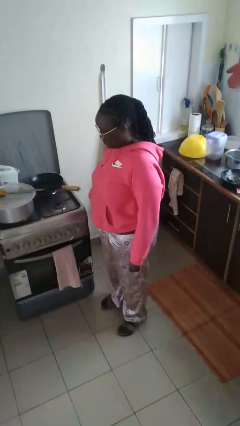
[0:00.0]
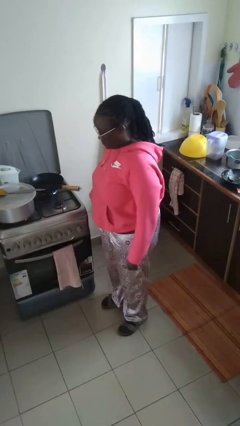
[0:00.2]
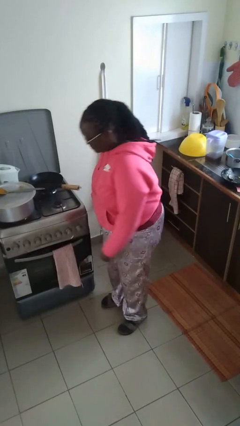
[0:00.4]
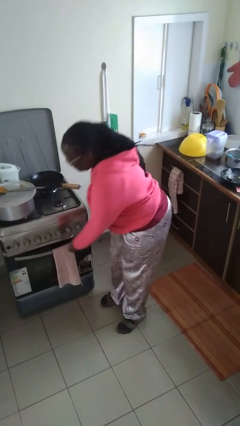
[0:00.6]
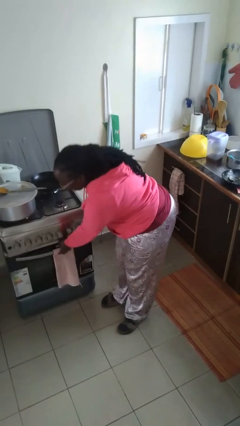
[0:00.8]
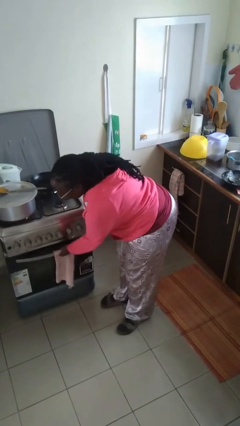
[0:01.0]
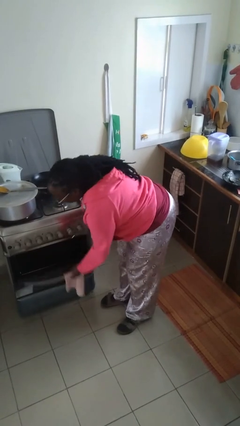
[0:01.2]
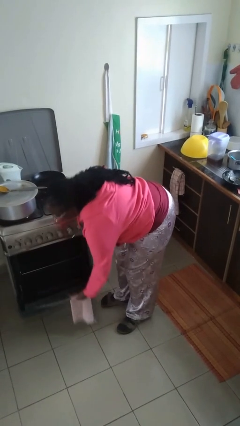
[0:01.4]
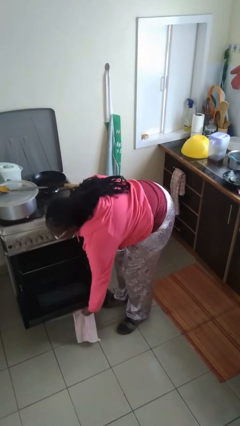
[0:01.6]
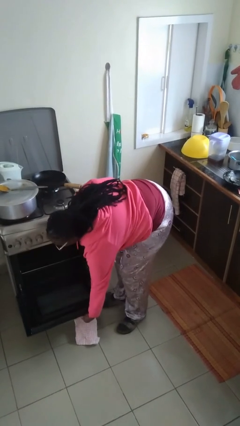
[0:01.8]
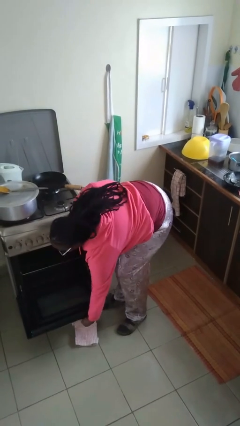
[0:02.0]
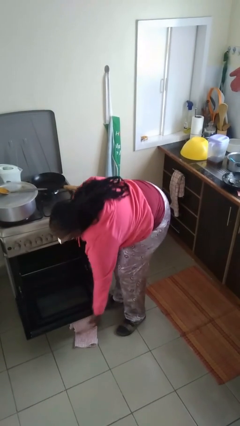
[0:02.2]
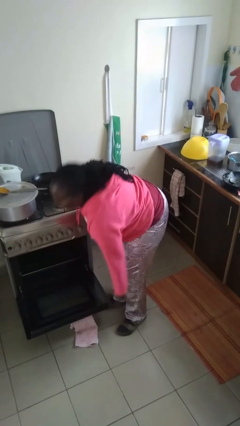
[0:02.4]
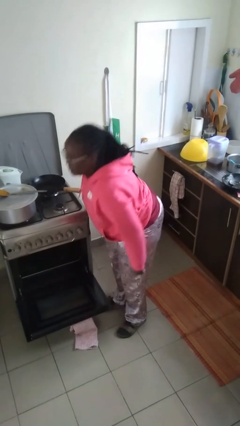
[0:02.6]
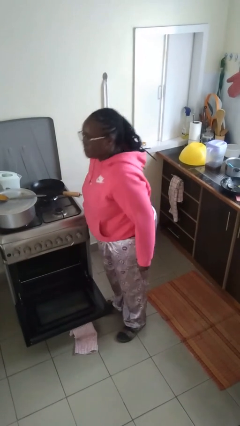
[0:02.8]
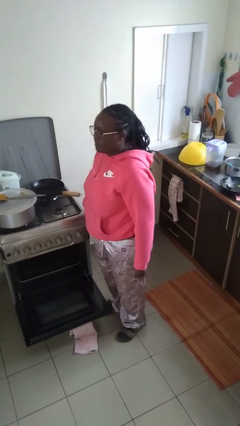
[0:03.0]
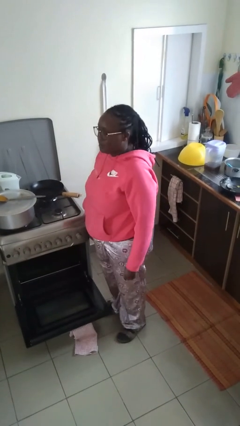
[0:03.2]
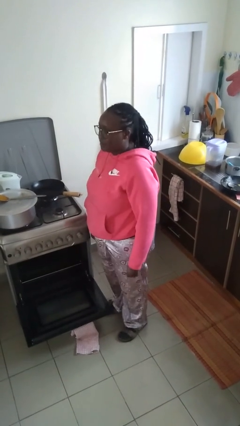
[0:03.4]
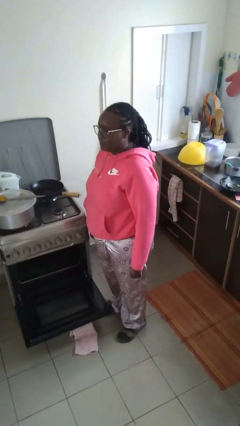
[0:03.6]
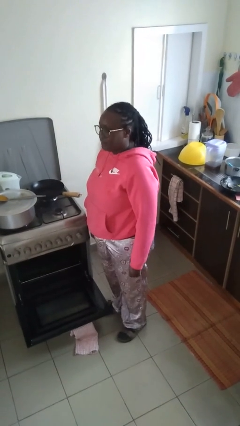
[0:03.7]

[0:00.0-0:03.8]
person opens oven door

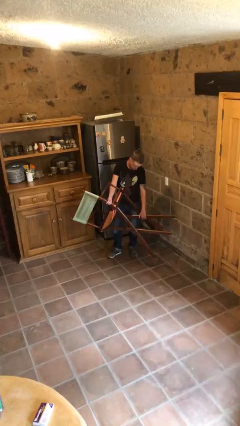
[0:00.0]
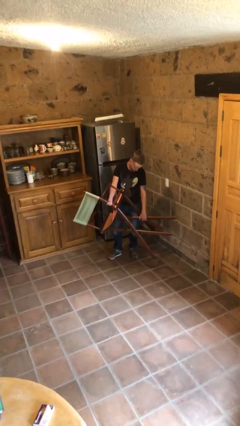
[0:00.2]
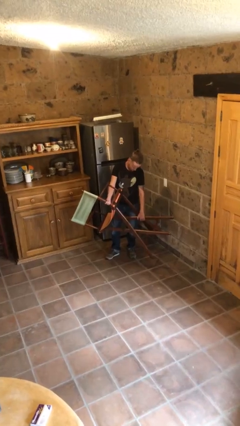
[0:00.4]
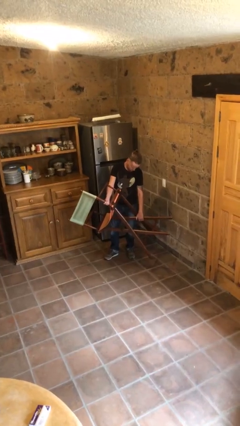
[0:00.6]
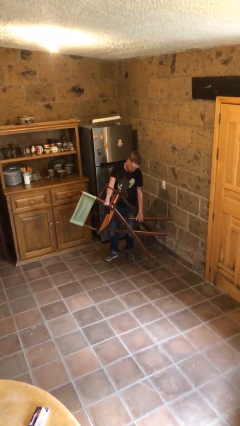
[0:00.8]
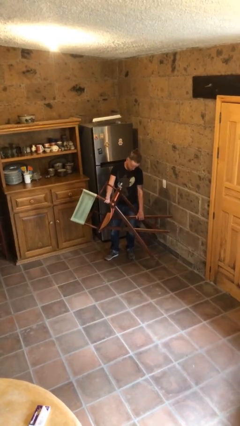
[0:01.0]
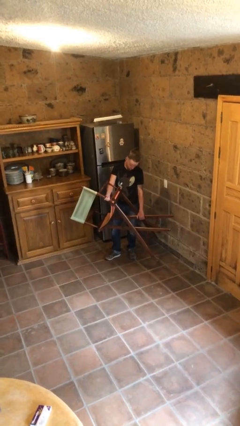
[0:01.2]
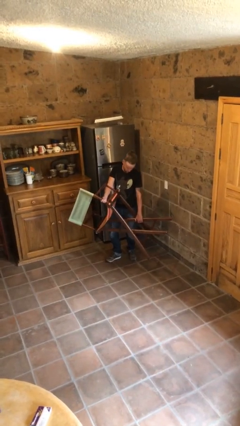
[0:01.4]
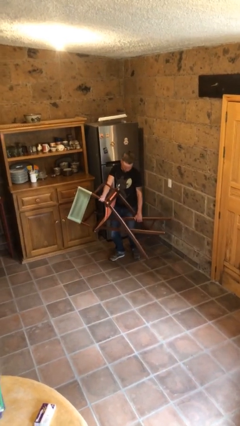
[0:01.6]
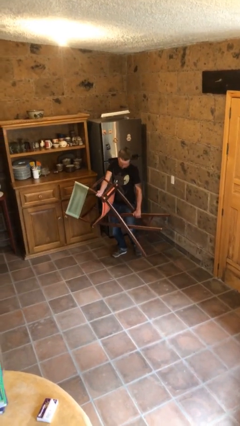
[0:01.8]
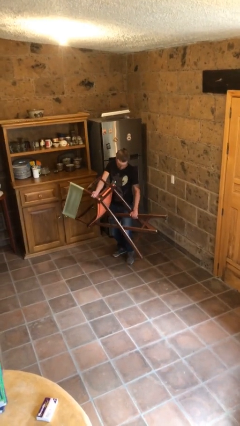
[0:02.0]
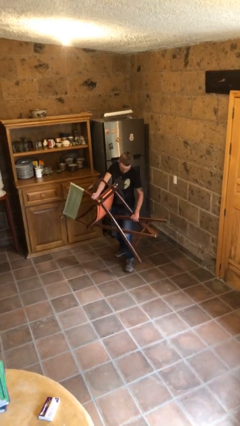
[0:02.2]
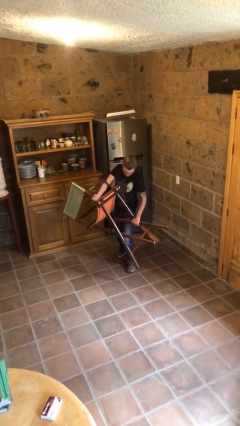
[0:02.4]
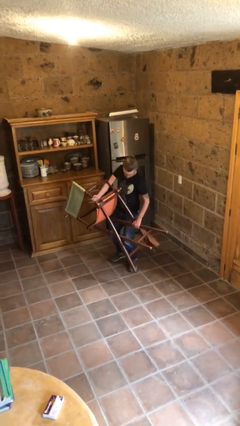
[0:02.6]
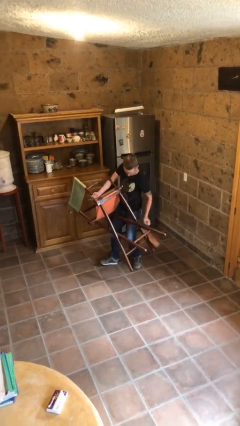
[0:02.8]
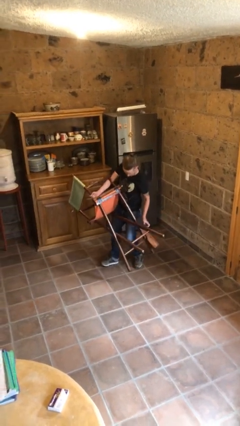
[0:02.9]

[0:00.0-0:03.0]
person carries heavy object

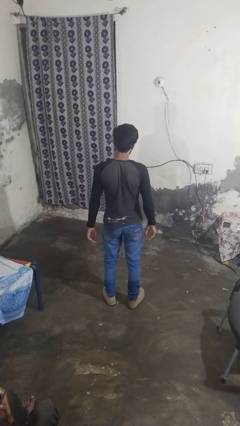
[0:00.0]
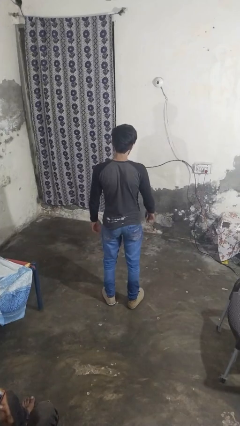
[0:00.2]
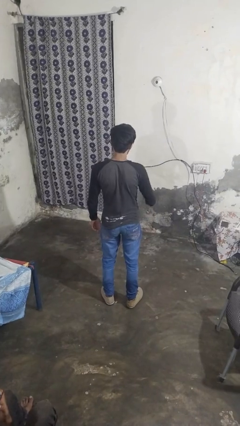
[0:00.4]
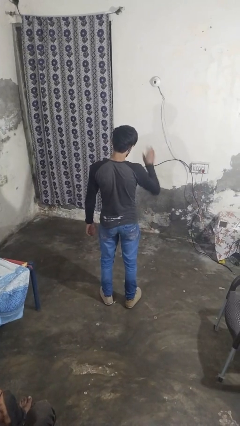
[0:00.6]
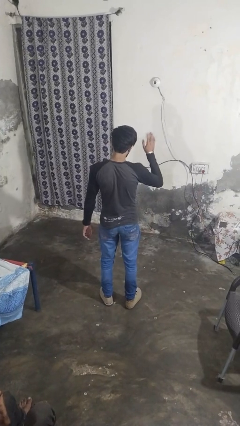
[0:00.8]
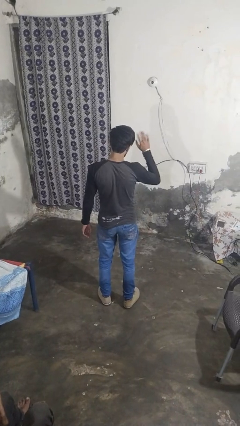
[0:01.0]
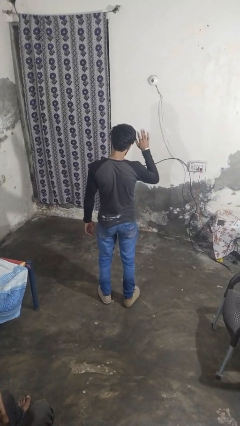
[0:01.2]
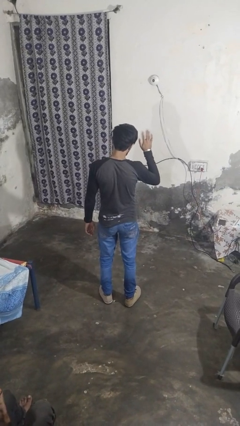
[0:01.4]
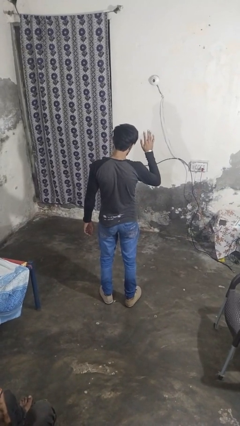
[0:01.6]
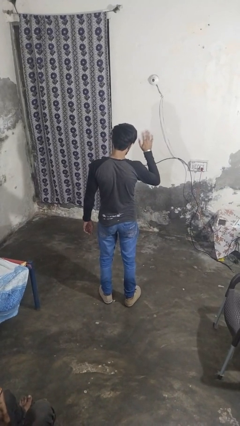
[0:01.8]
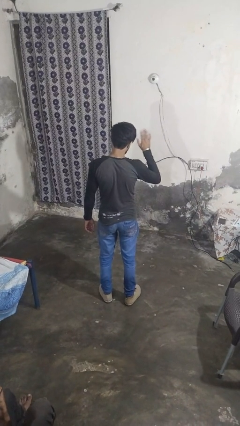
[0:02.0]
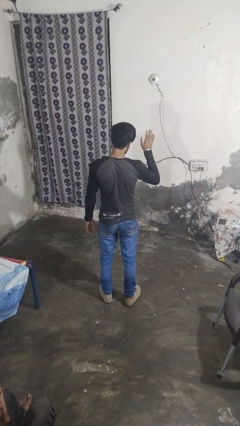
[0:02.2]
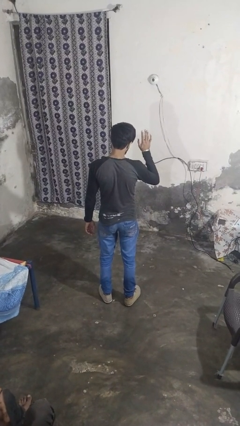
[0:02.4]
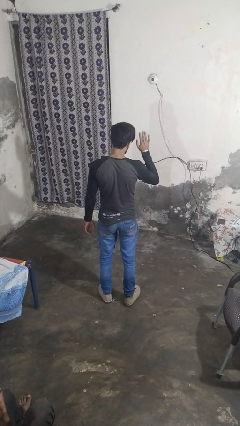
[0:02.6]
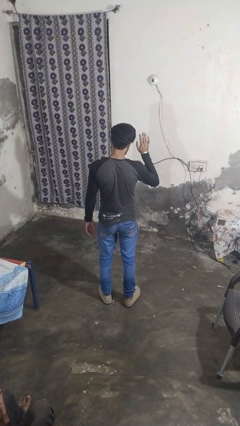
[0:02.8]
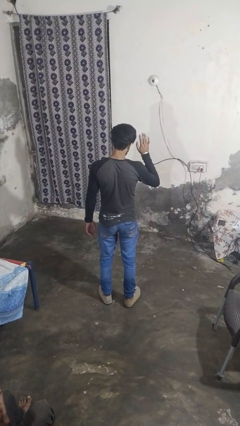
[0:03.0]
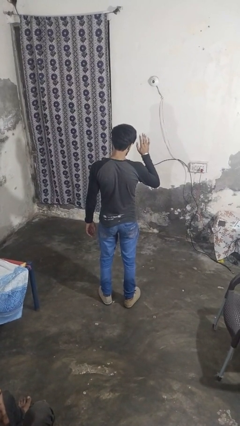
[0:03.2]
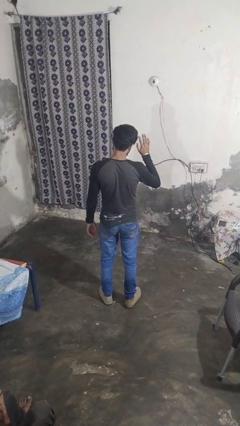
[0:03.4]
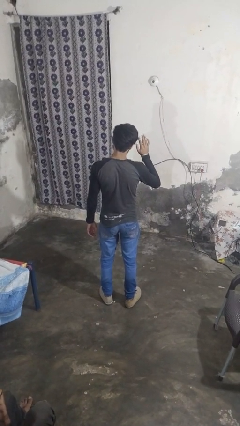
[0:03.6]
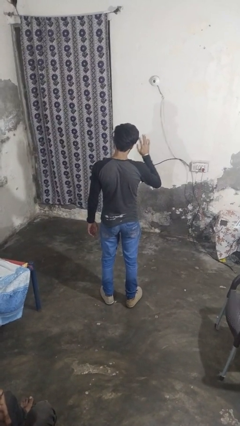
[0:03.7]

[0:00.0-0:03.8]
person waves at person

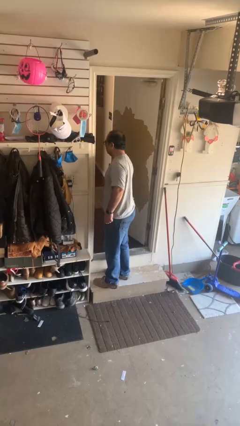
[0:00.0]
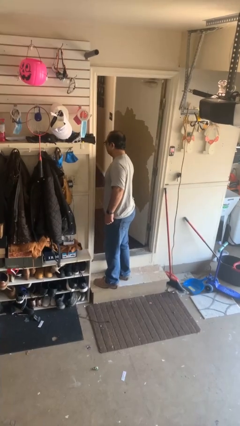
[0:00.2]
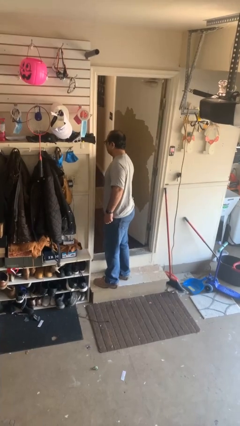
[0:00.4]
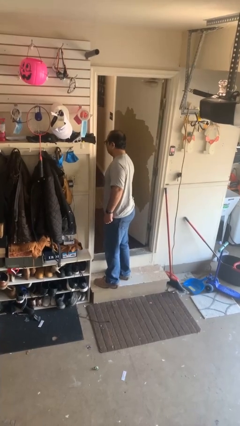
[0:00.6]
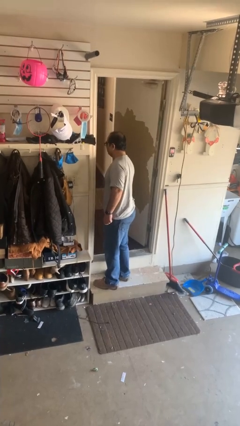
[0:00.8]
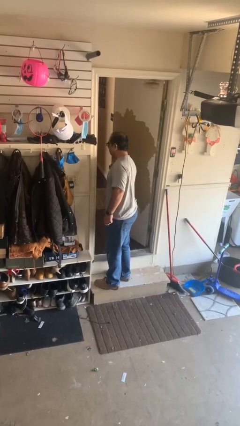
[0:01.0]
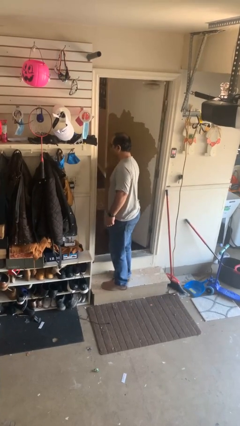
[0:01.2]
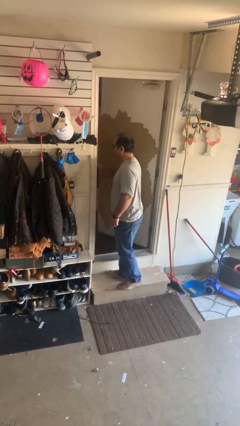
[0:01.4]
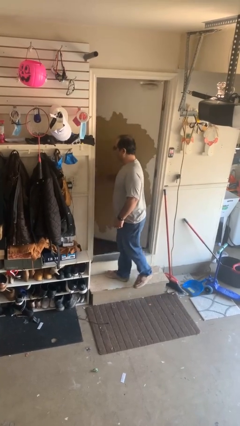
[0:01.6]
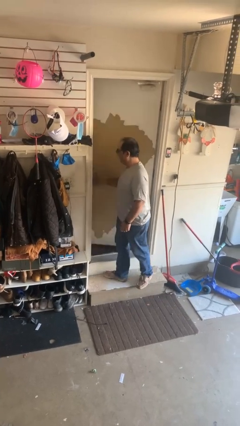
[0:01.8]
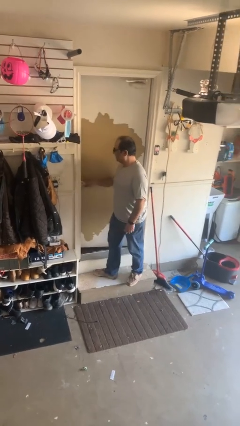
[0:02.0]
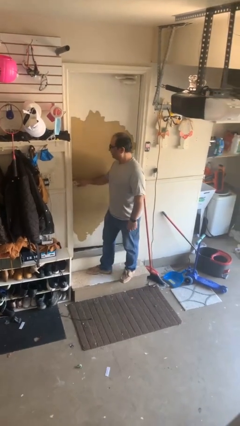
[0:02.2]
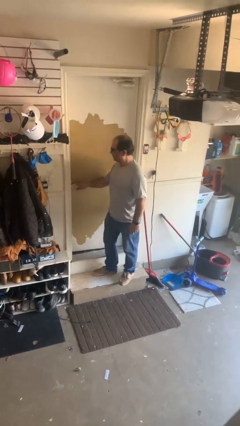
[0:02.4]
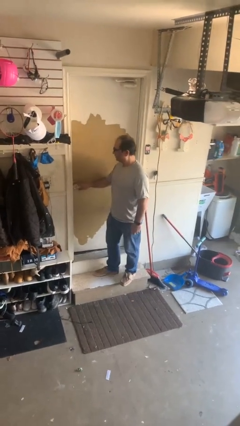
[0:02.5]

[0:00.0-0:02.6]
person closes facility door

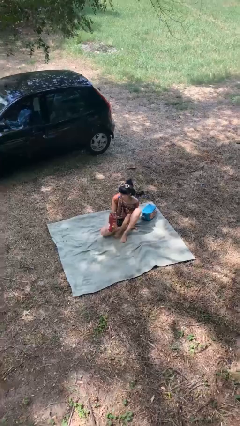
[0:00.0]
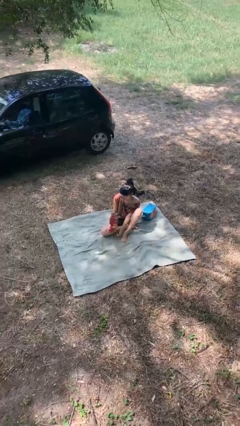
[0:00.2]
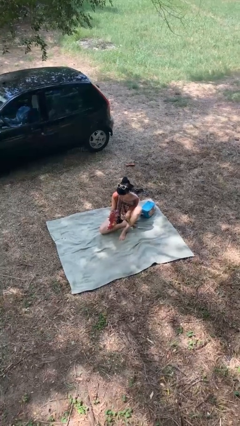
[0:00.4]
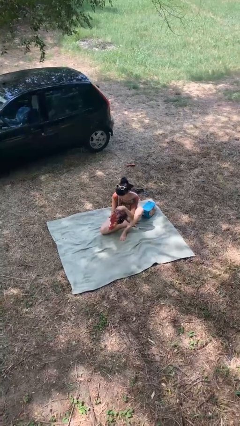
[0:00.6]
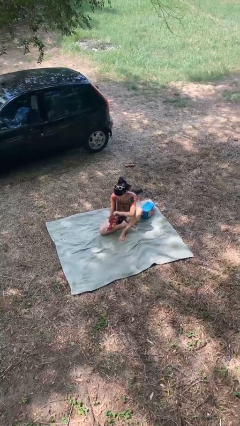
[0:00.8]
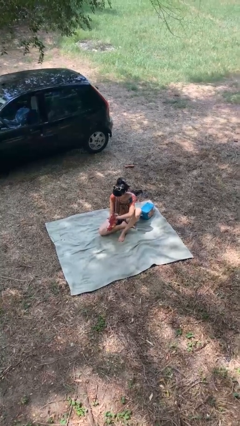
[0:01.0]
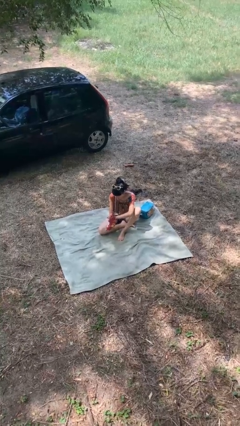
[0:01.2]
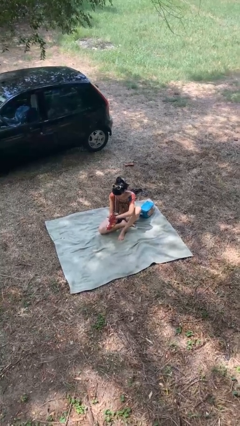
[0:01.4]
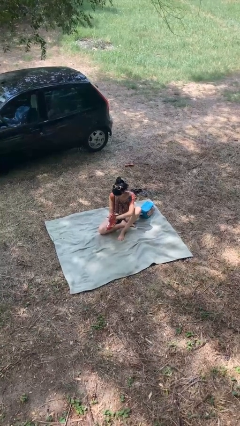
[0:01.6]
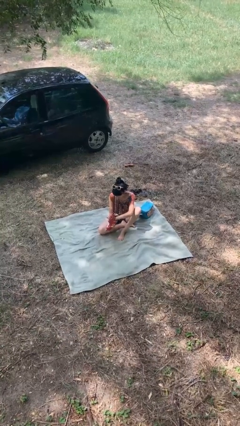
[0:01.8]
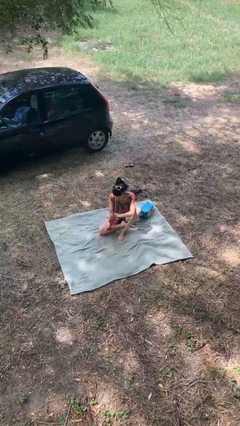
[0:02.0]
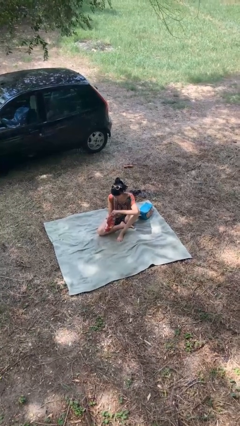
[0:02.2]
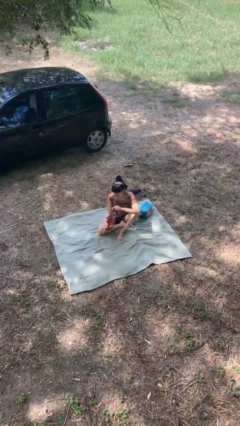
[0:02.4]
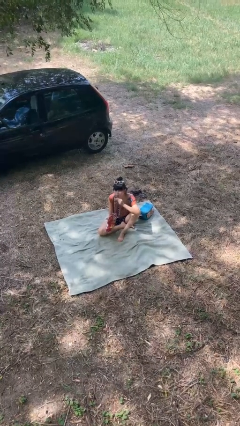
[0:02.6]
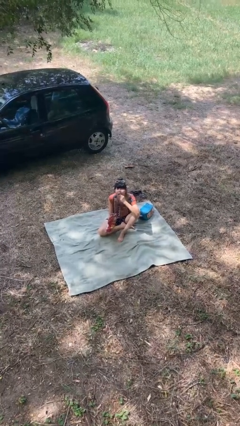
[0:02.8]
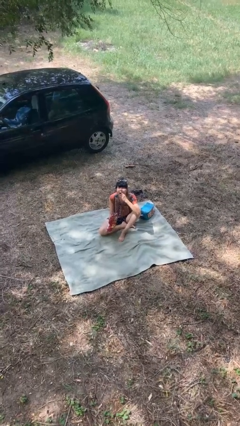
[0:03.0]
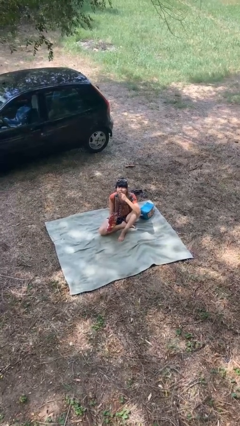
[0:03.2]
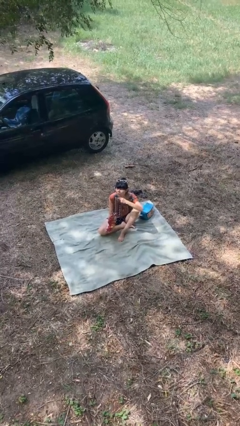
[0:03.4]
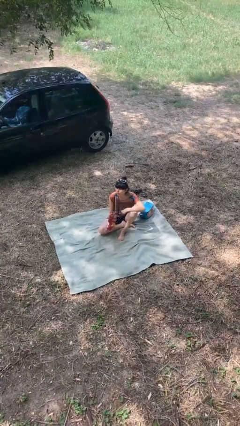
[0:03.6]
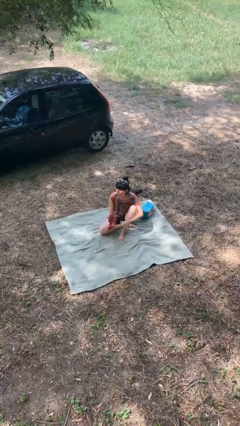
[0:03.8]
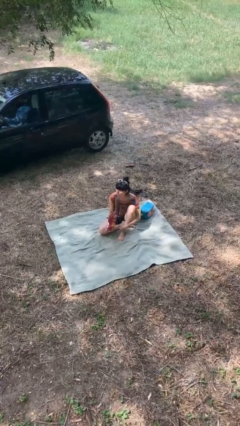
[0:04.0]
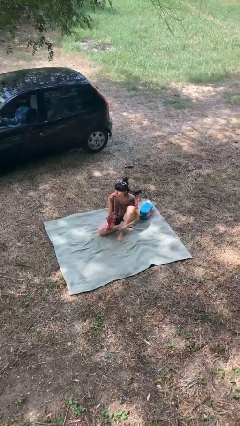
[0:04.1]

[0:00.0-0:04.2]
person eats snack from bag

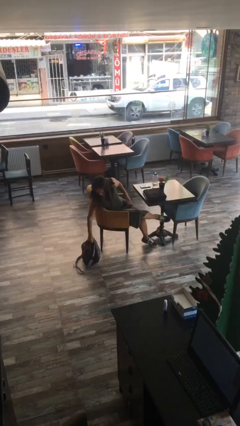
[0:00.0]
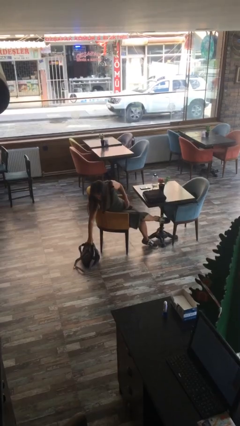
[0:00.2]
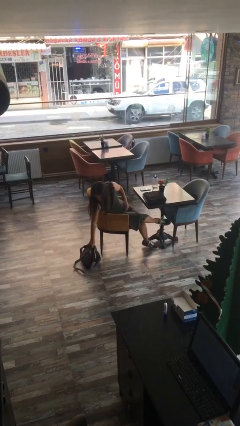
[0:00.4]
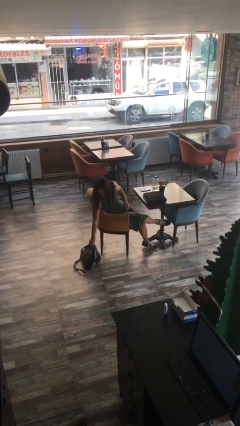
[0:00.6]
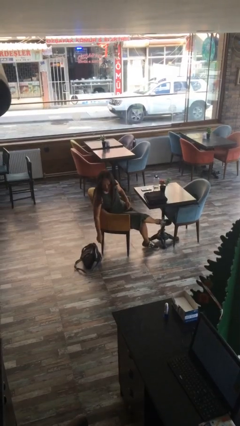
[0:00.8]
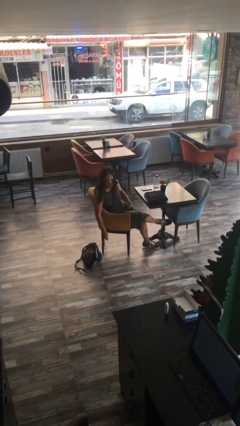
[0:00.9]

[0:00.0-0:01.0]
person puts down object on floor
